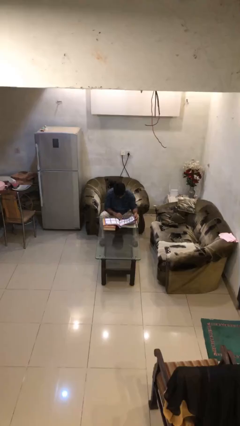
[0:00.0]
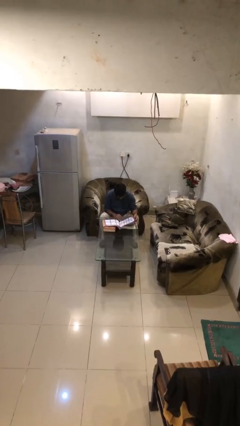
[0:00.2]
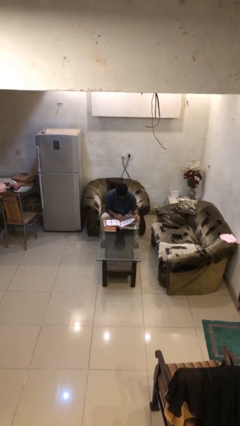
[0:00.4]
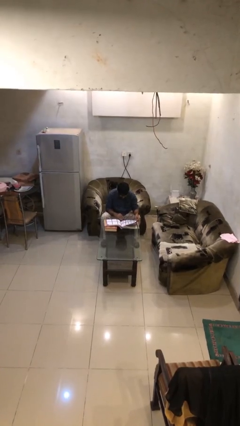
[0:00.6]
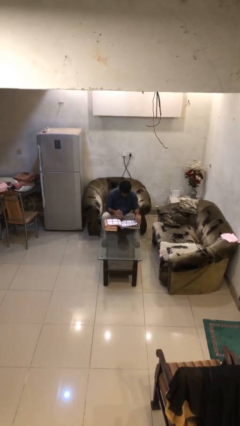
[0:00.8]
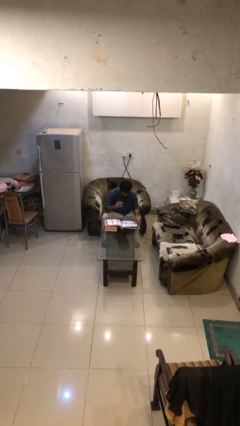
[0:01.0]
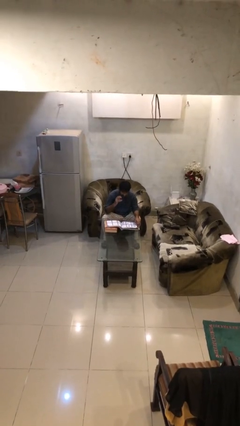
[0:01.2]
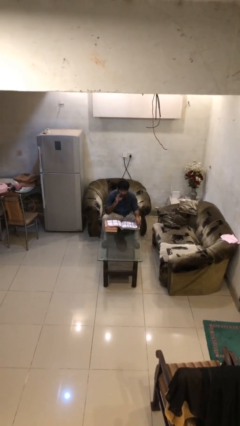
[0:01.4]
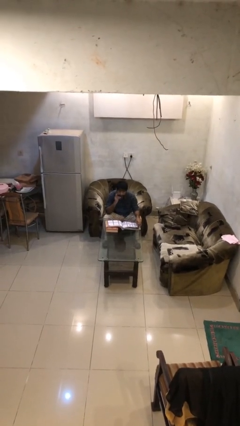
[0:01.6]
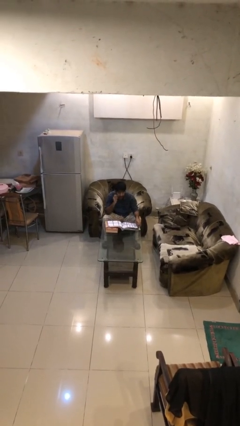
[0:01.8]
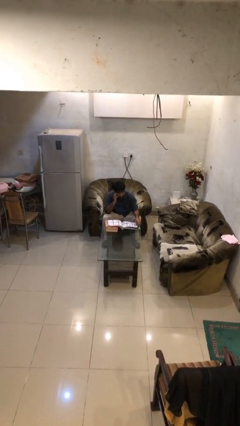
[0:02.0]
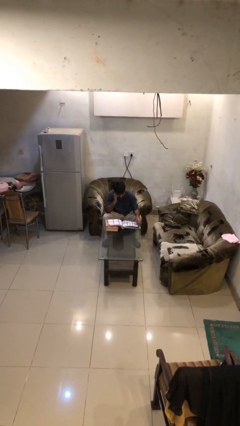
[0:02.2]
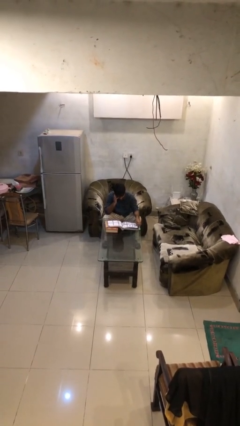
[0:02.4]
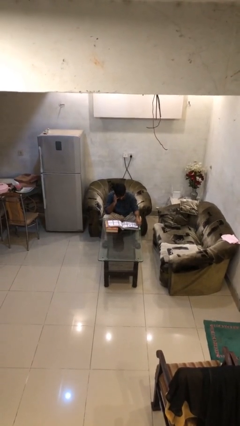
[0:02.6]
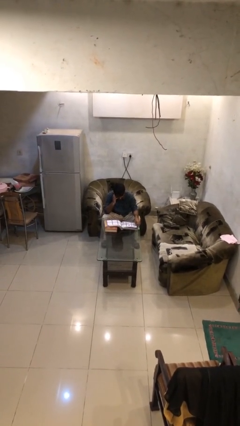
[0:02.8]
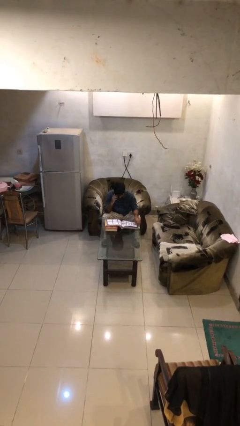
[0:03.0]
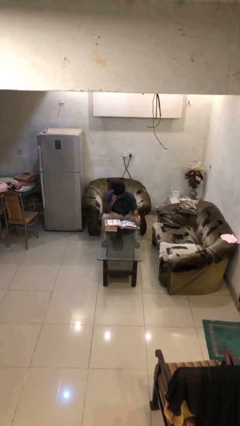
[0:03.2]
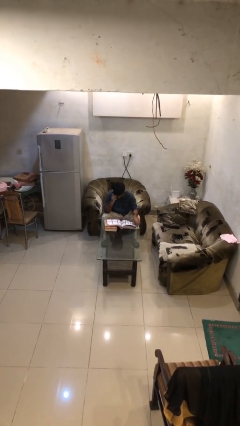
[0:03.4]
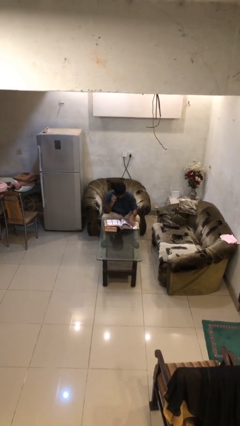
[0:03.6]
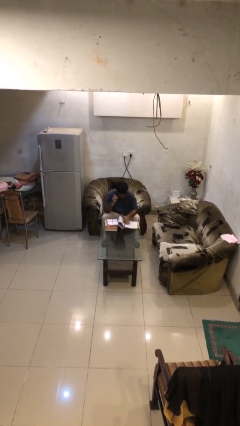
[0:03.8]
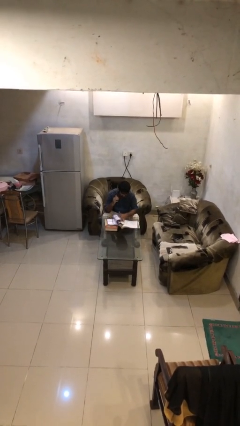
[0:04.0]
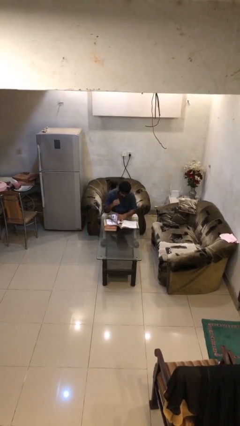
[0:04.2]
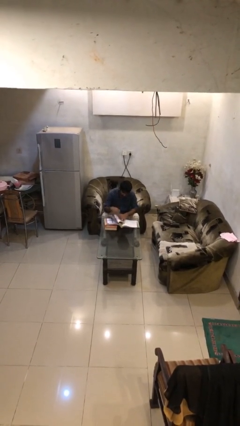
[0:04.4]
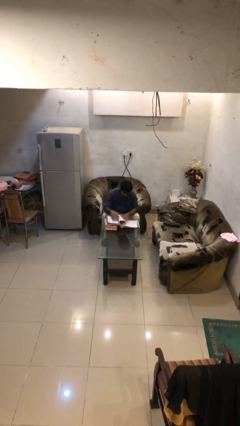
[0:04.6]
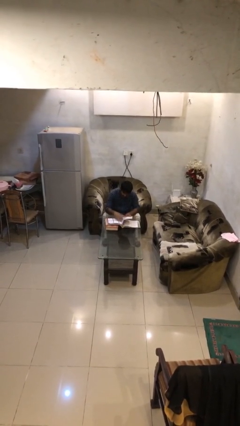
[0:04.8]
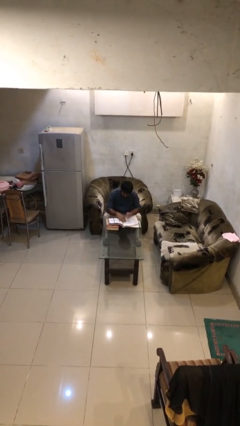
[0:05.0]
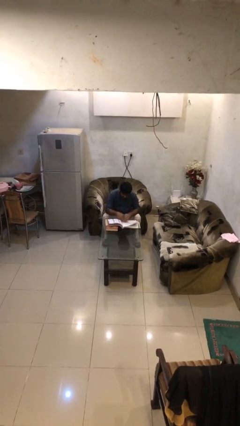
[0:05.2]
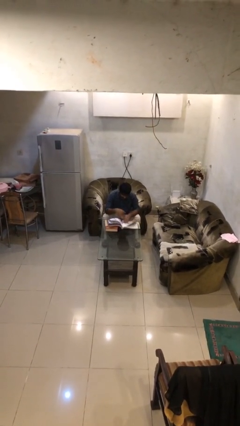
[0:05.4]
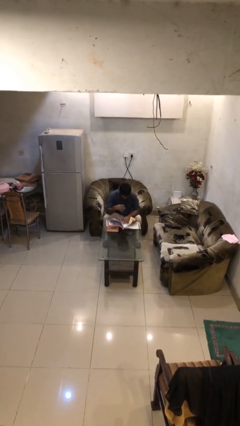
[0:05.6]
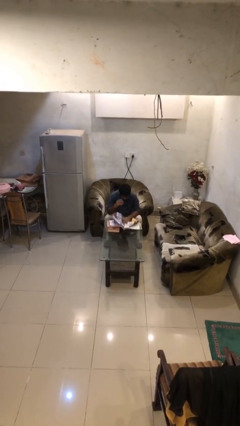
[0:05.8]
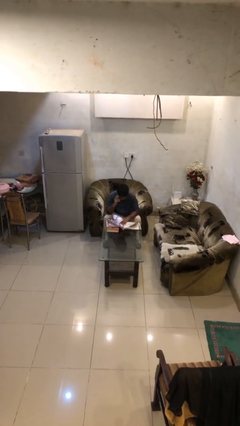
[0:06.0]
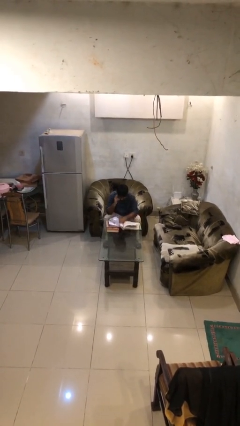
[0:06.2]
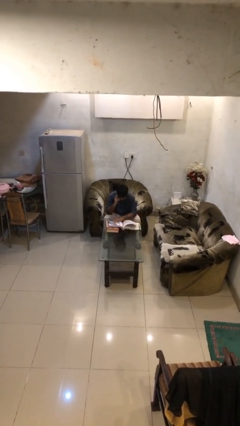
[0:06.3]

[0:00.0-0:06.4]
person reads document

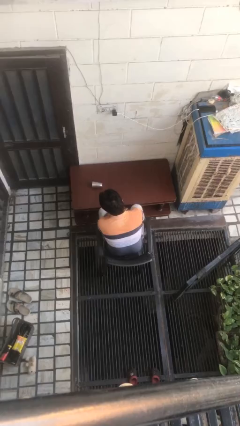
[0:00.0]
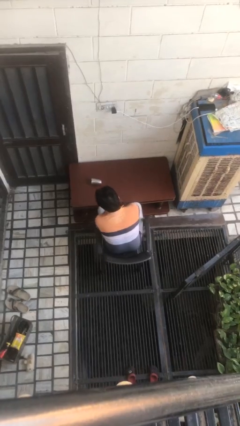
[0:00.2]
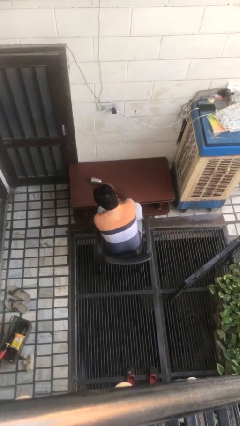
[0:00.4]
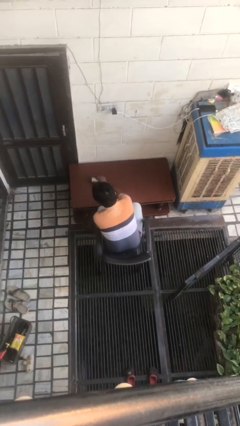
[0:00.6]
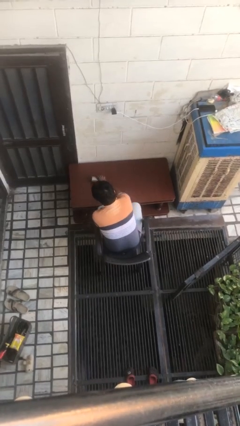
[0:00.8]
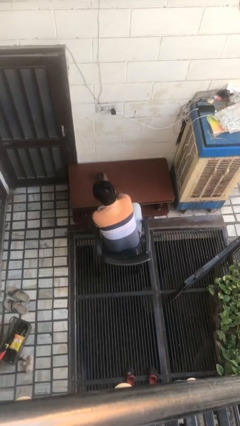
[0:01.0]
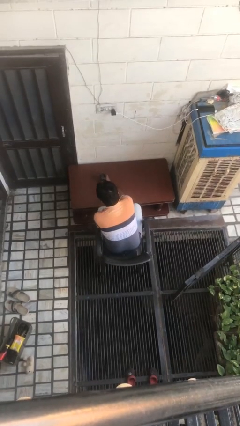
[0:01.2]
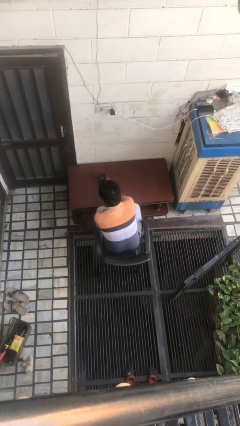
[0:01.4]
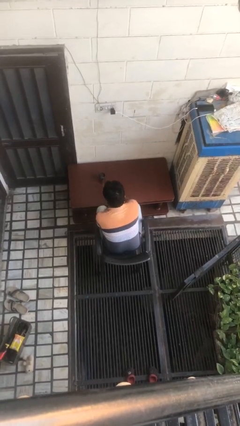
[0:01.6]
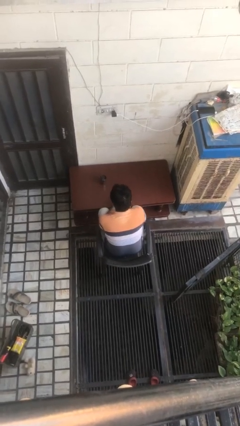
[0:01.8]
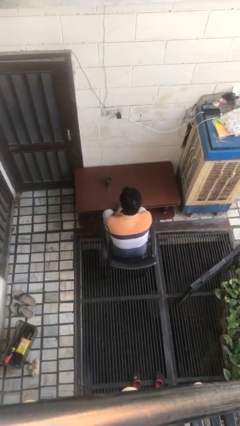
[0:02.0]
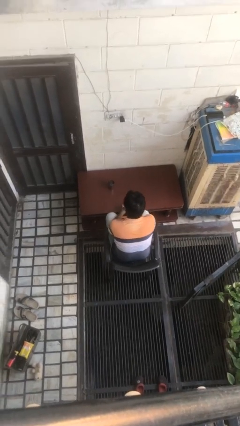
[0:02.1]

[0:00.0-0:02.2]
person sets upright glass

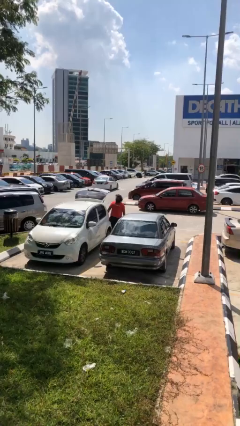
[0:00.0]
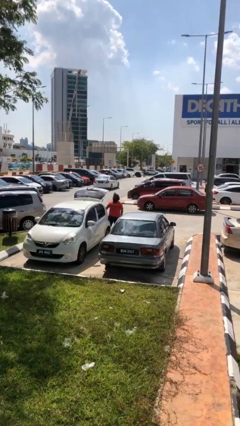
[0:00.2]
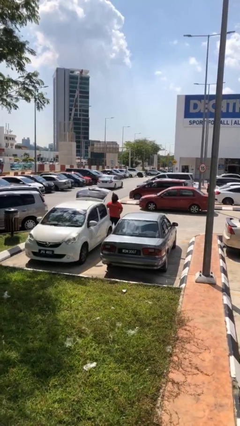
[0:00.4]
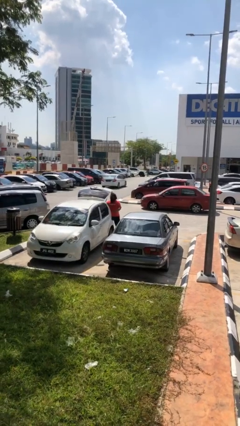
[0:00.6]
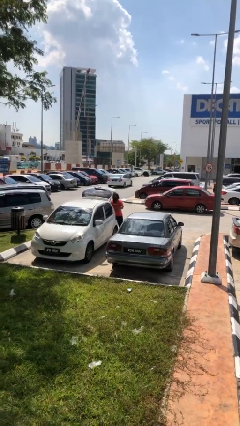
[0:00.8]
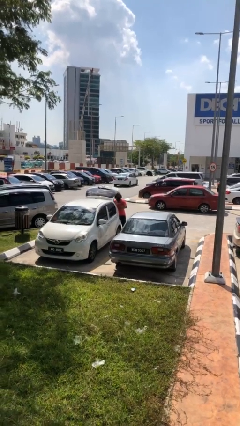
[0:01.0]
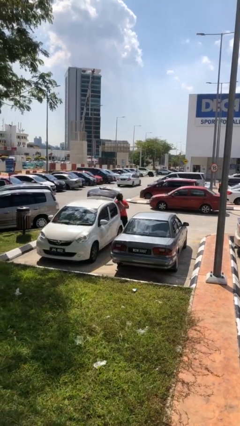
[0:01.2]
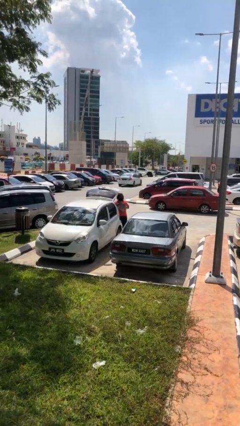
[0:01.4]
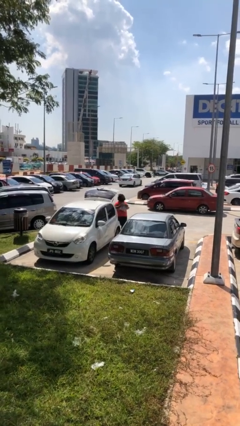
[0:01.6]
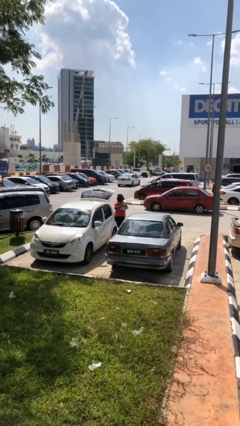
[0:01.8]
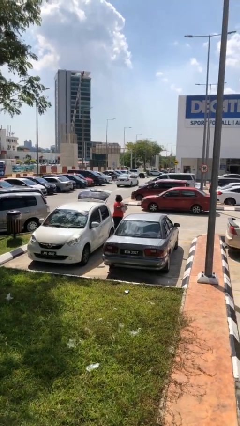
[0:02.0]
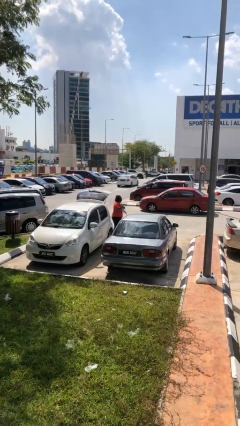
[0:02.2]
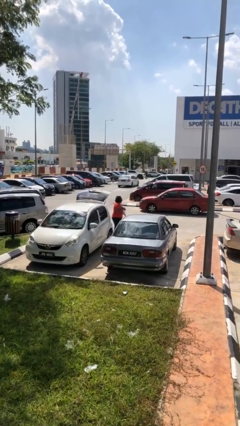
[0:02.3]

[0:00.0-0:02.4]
person unloads car

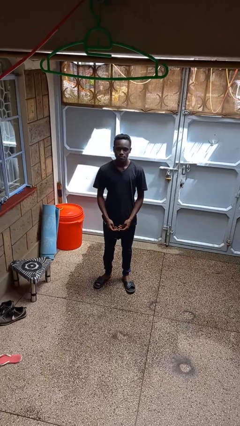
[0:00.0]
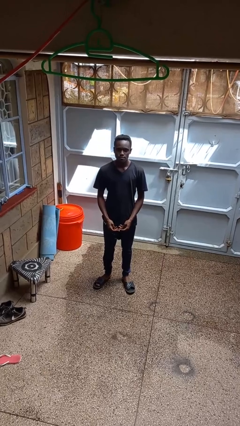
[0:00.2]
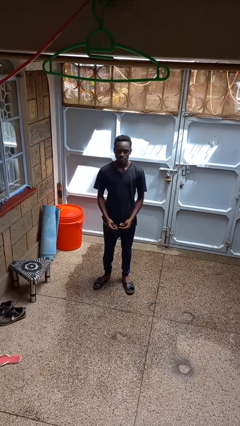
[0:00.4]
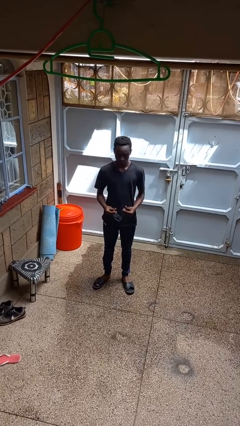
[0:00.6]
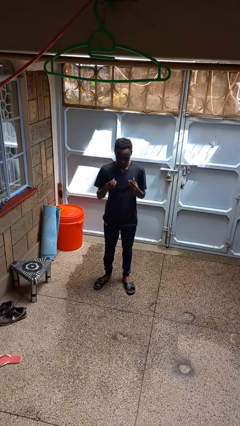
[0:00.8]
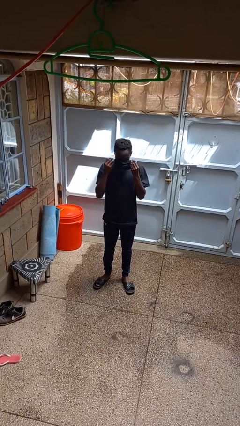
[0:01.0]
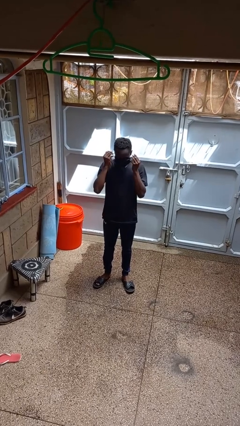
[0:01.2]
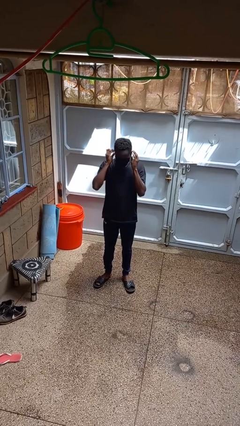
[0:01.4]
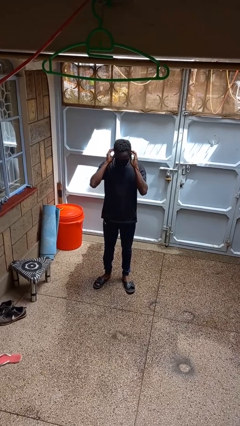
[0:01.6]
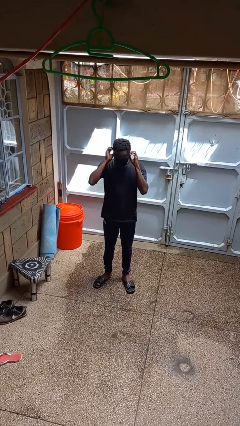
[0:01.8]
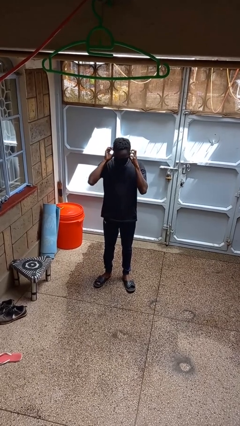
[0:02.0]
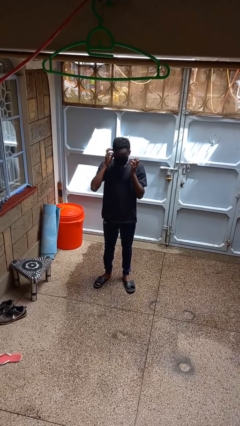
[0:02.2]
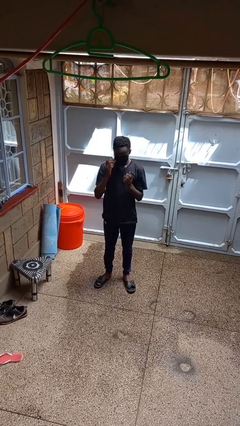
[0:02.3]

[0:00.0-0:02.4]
person puts on facemask

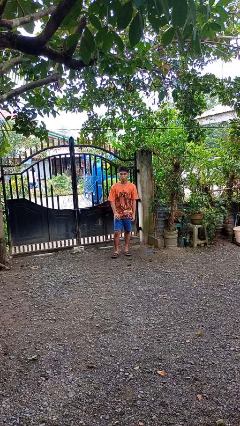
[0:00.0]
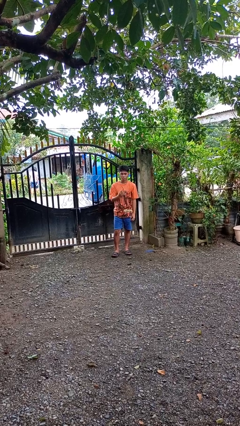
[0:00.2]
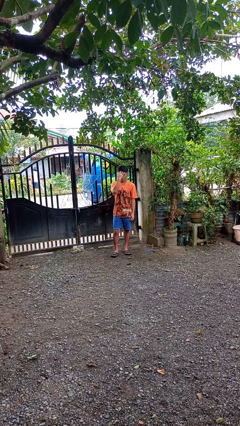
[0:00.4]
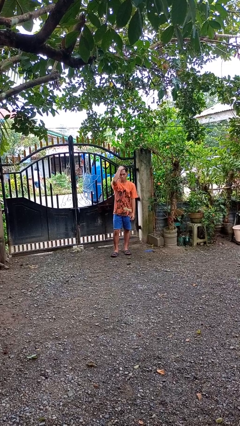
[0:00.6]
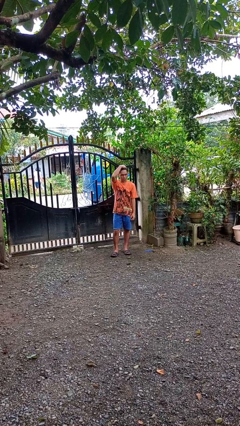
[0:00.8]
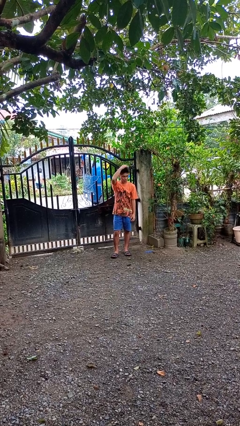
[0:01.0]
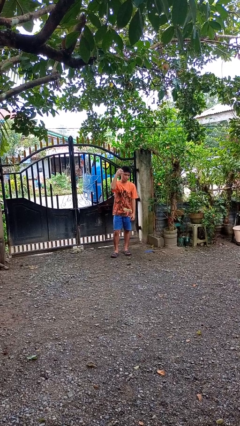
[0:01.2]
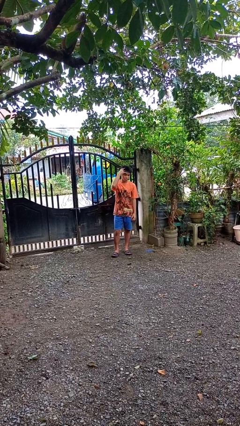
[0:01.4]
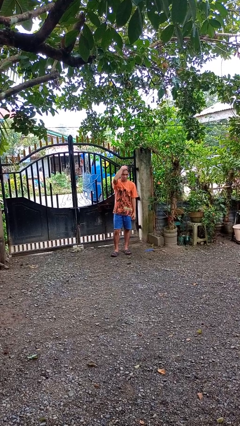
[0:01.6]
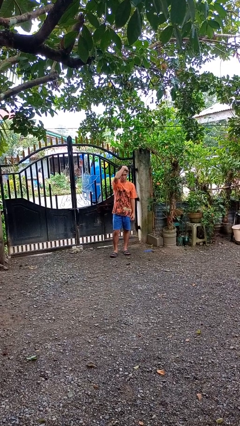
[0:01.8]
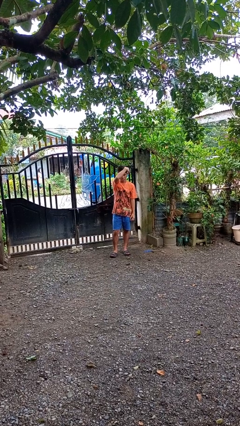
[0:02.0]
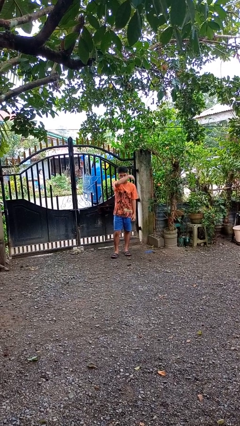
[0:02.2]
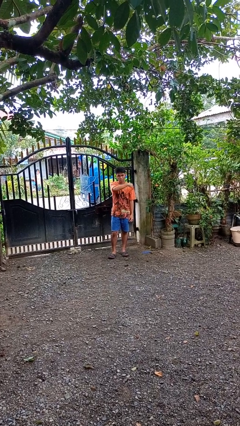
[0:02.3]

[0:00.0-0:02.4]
person strokes hair

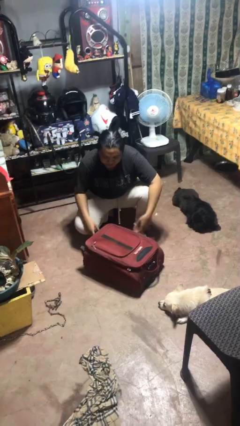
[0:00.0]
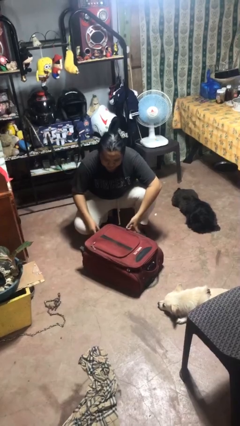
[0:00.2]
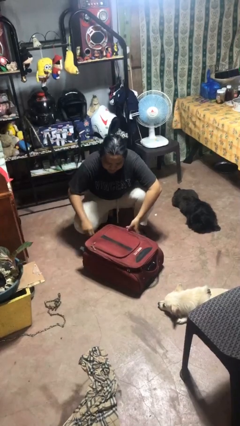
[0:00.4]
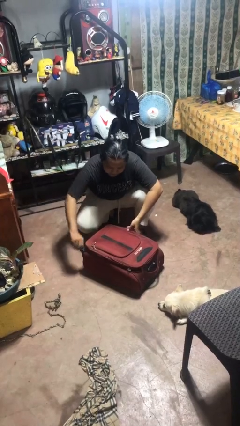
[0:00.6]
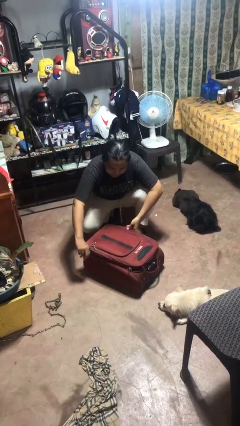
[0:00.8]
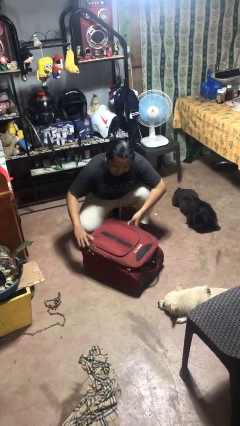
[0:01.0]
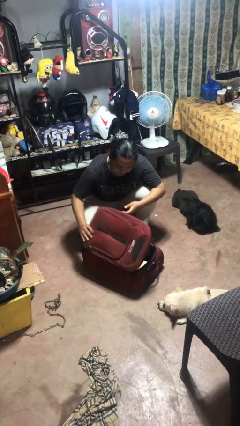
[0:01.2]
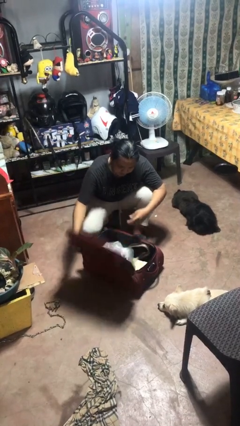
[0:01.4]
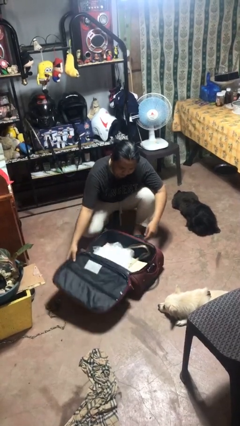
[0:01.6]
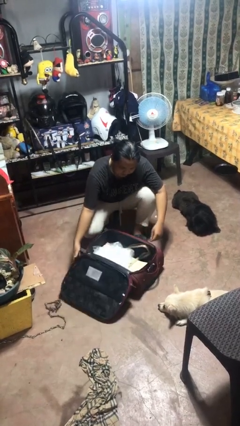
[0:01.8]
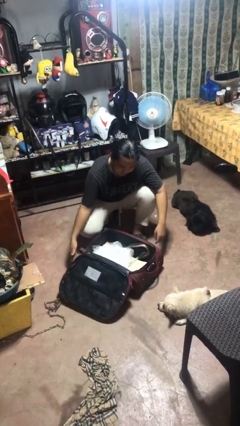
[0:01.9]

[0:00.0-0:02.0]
person opens suitcase
